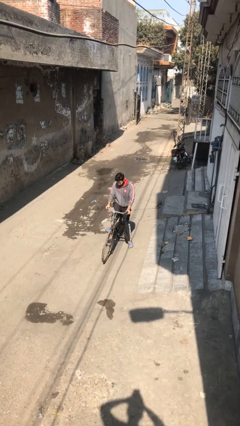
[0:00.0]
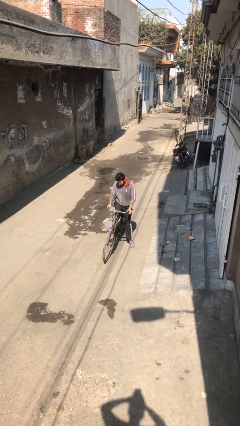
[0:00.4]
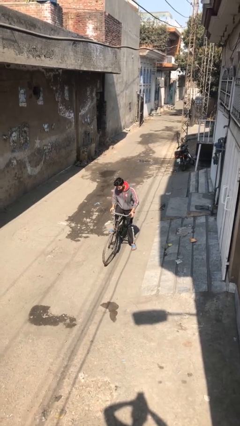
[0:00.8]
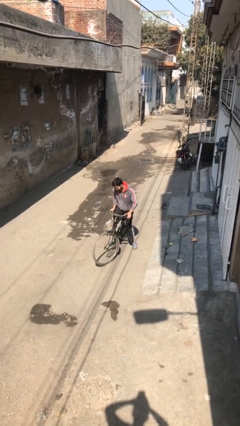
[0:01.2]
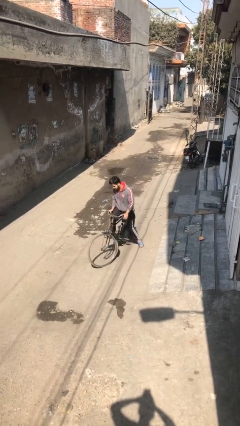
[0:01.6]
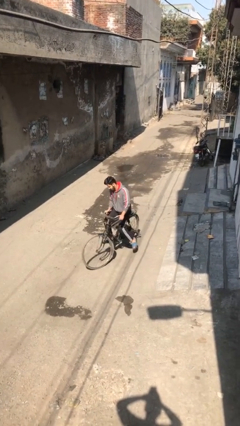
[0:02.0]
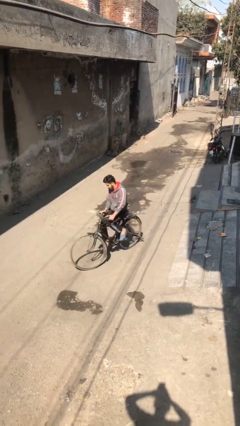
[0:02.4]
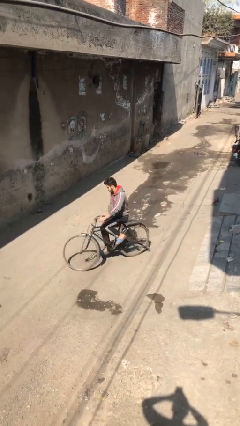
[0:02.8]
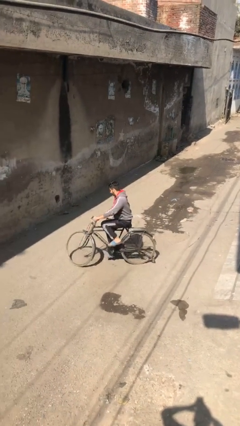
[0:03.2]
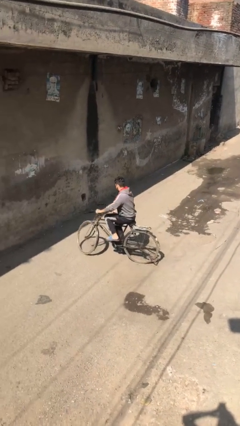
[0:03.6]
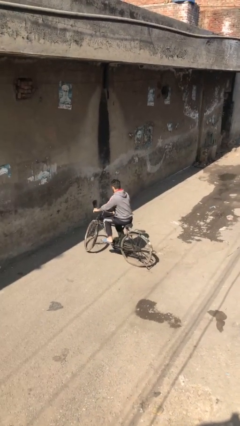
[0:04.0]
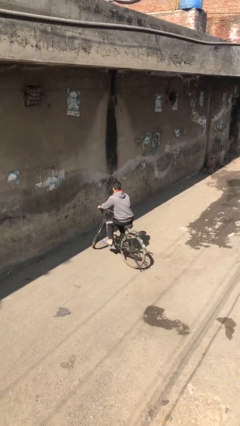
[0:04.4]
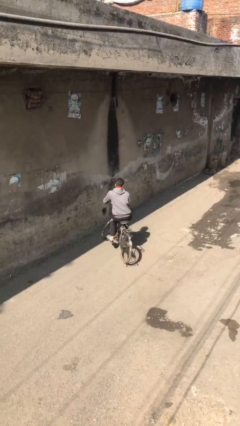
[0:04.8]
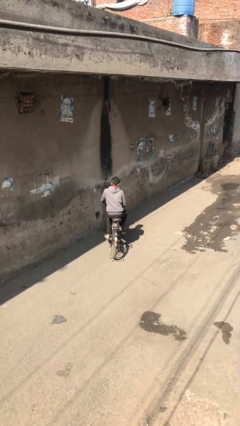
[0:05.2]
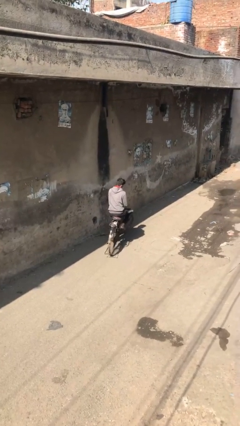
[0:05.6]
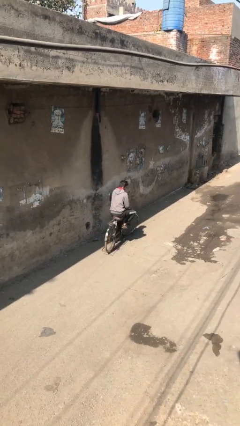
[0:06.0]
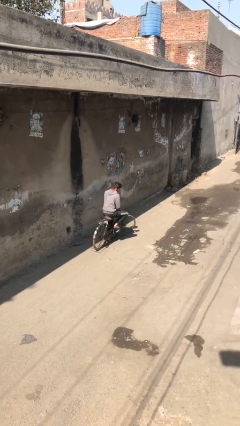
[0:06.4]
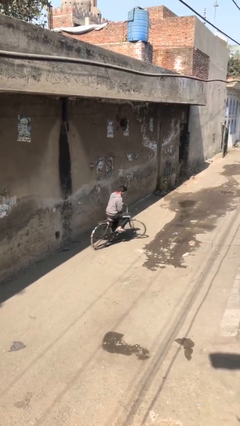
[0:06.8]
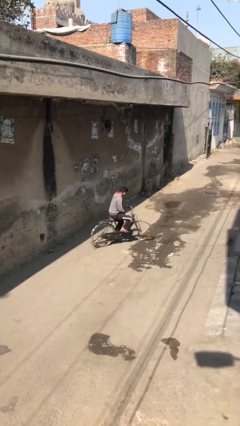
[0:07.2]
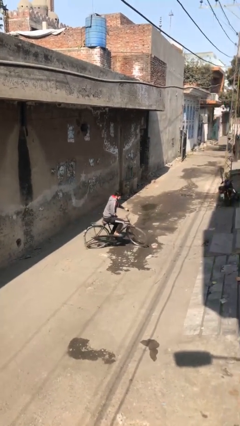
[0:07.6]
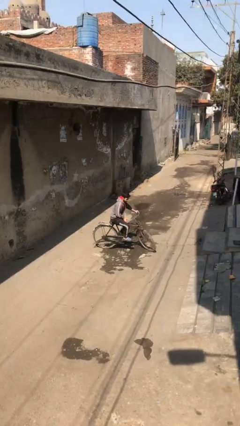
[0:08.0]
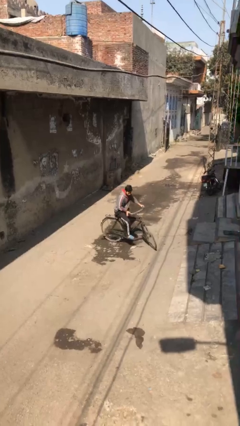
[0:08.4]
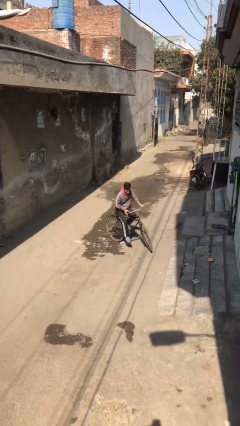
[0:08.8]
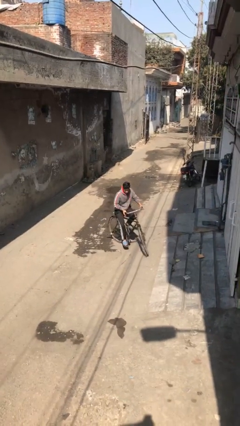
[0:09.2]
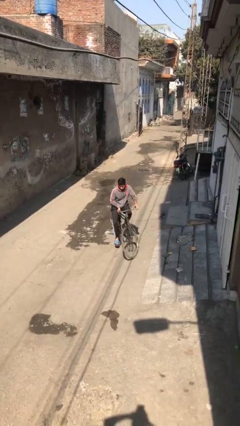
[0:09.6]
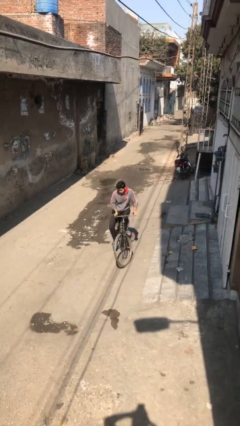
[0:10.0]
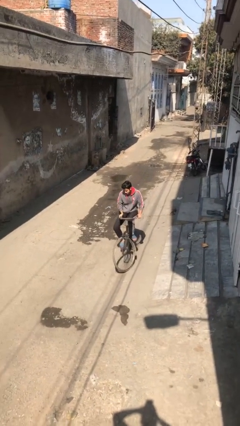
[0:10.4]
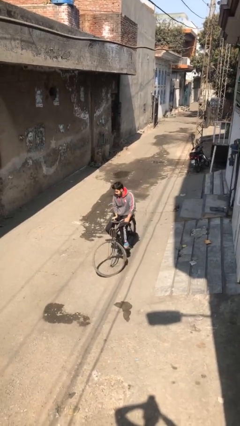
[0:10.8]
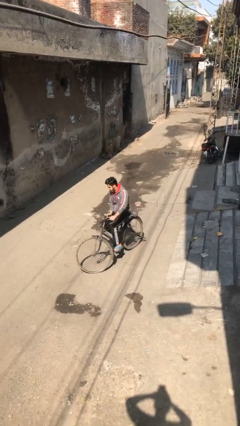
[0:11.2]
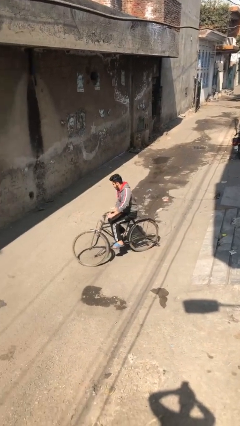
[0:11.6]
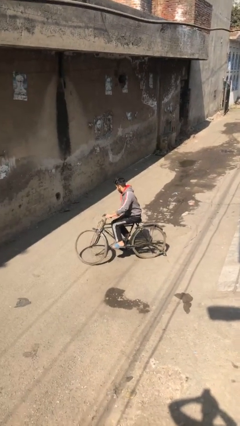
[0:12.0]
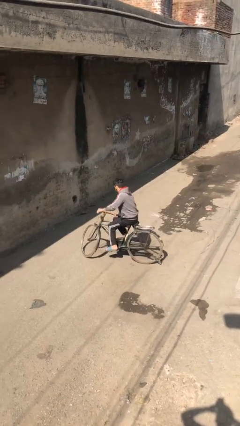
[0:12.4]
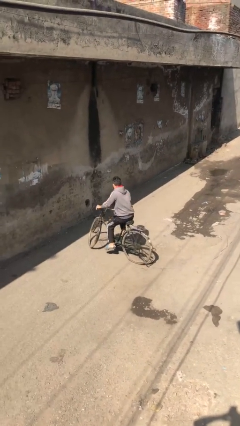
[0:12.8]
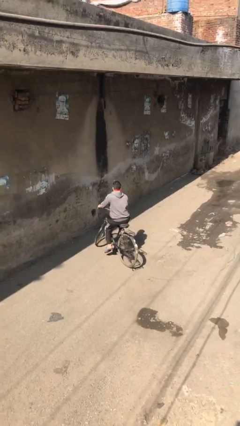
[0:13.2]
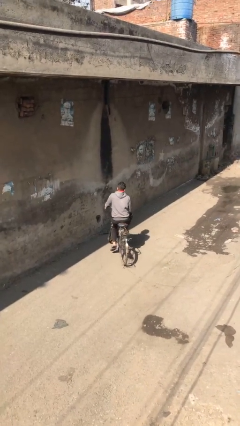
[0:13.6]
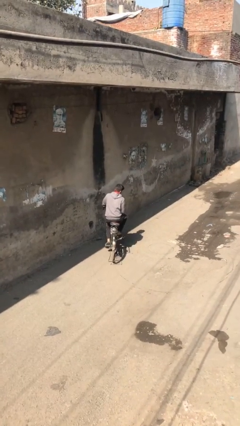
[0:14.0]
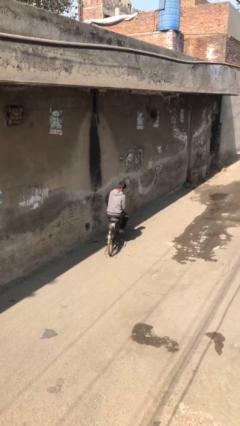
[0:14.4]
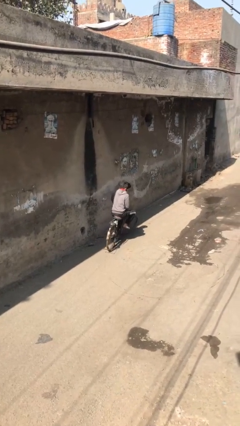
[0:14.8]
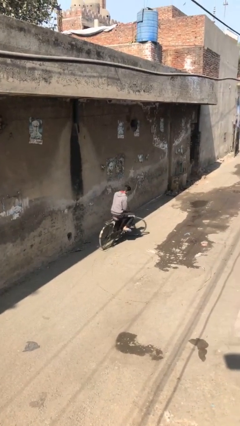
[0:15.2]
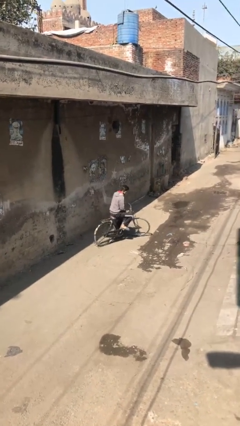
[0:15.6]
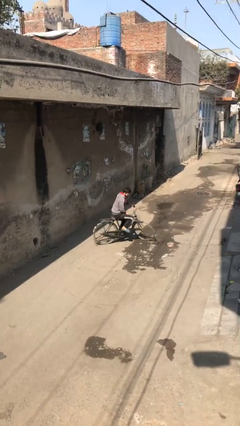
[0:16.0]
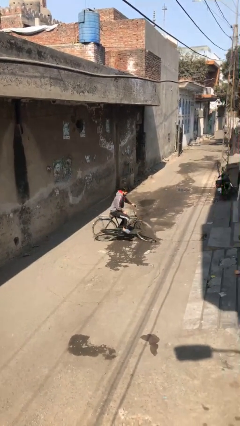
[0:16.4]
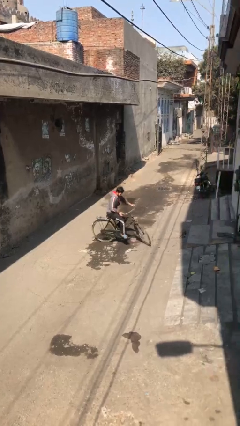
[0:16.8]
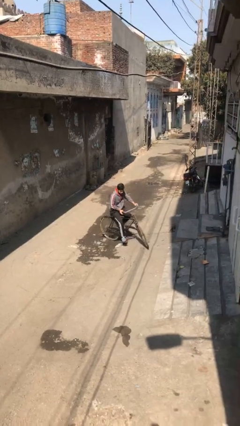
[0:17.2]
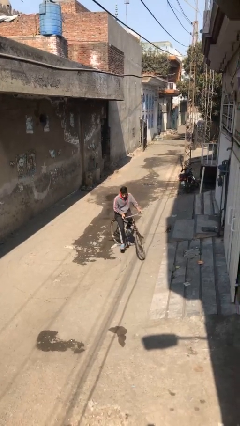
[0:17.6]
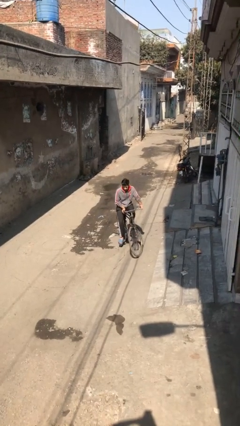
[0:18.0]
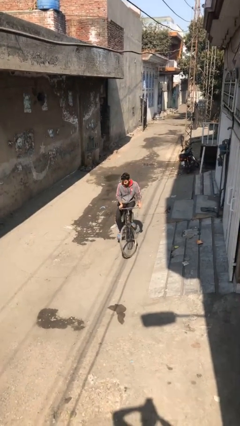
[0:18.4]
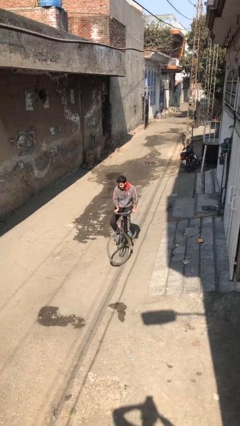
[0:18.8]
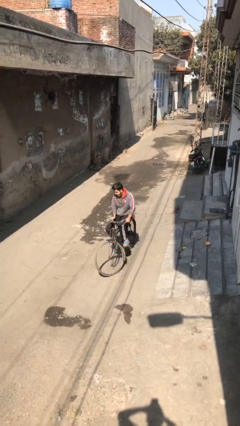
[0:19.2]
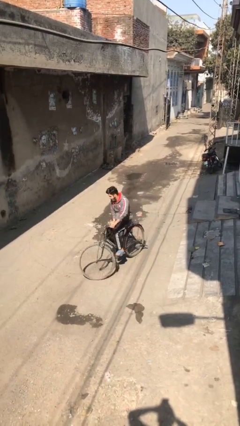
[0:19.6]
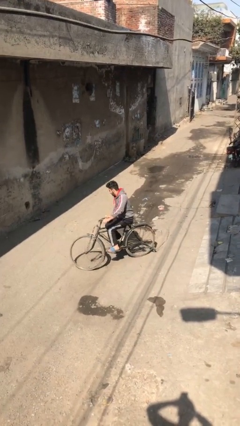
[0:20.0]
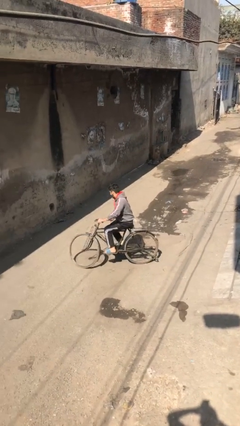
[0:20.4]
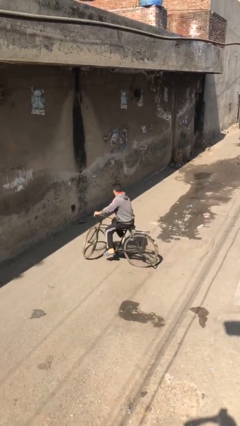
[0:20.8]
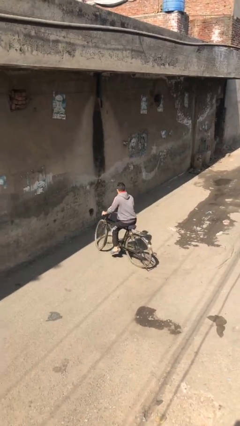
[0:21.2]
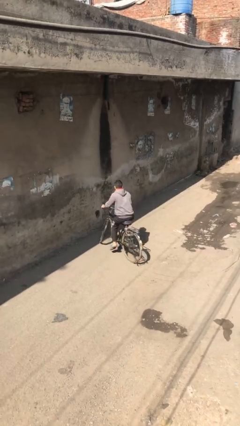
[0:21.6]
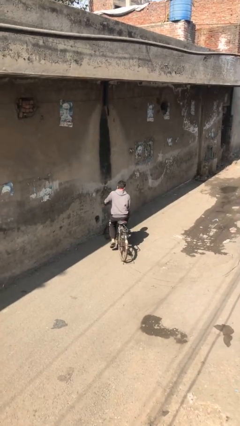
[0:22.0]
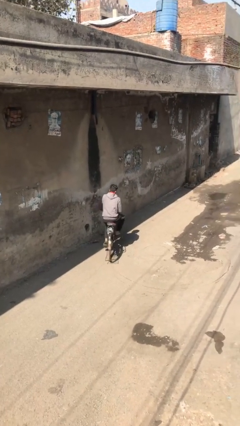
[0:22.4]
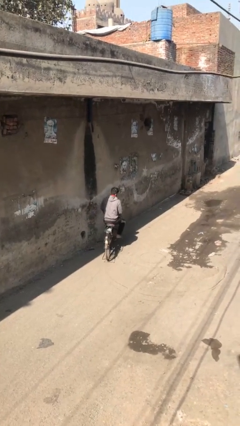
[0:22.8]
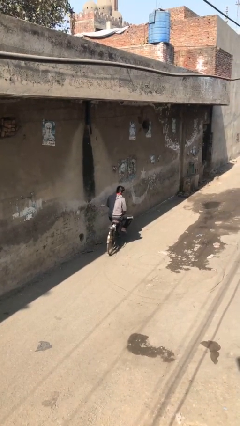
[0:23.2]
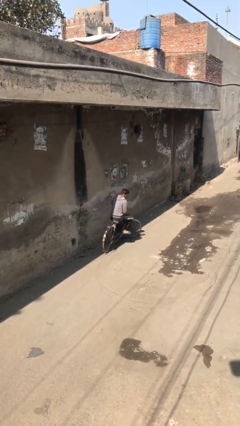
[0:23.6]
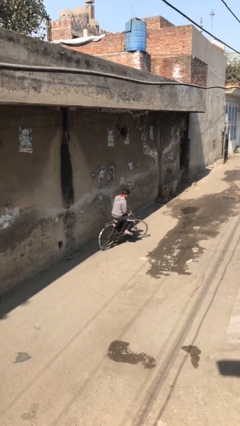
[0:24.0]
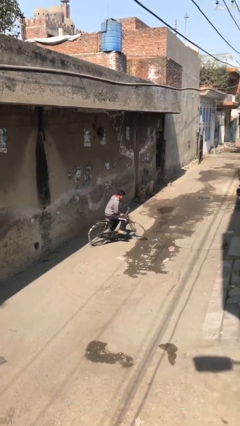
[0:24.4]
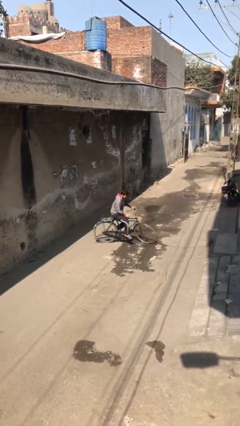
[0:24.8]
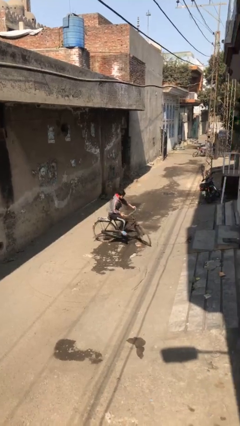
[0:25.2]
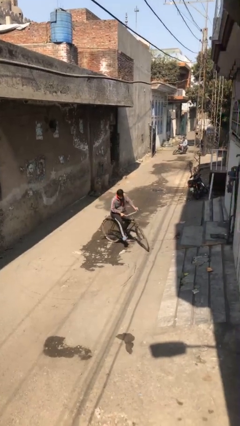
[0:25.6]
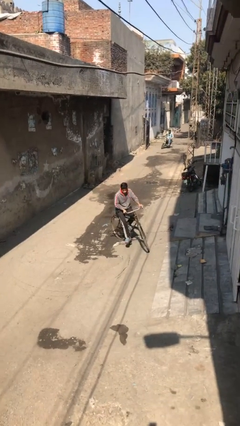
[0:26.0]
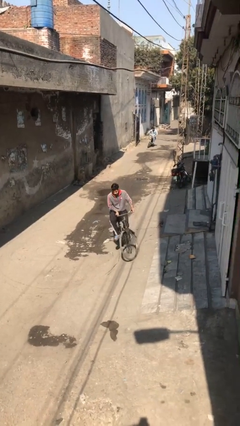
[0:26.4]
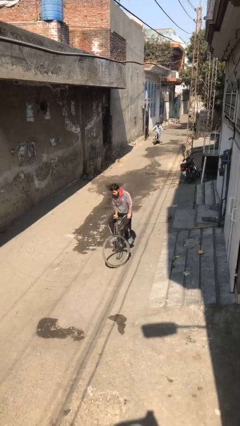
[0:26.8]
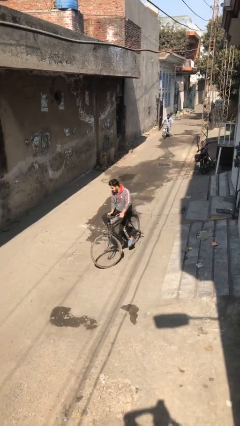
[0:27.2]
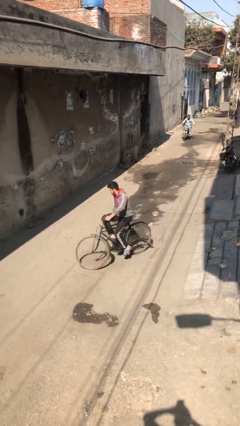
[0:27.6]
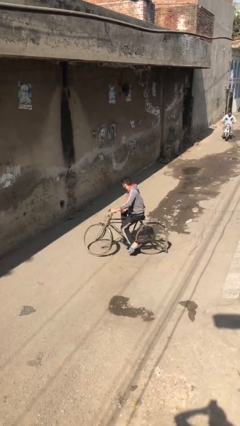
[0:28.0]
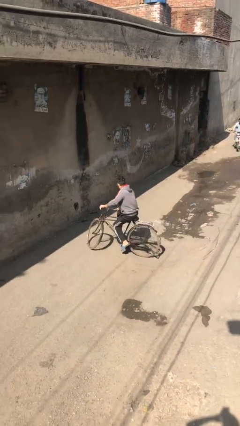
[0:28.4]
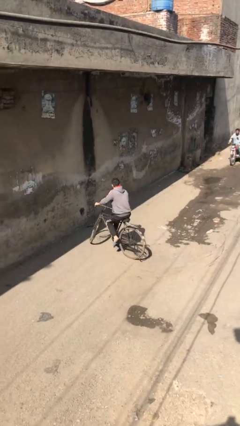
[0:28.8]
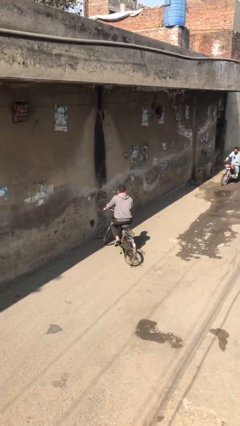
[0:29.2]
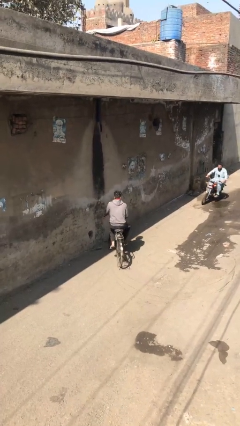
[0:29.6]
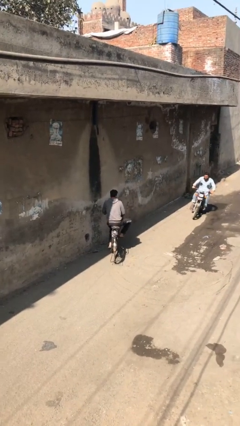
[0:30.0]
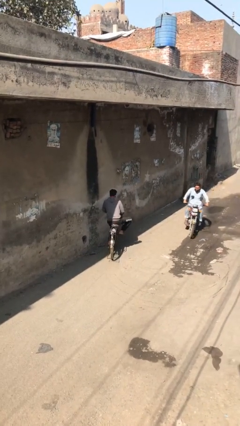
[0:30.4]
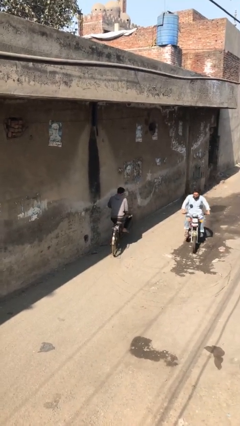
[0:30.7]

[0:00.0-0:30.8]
person rides bicycle

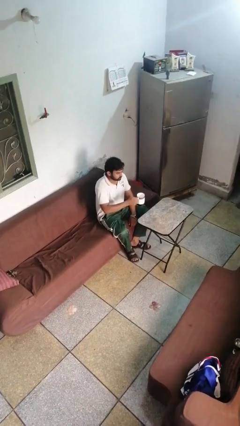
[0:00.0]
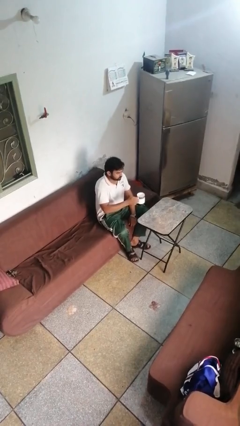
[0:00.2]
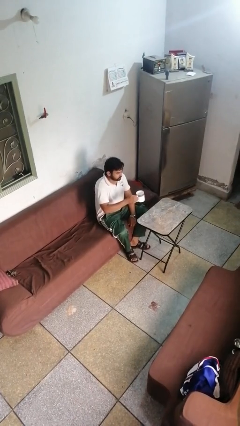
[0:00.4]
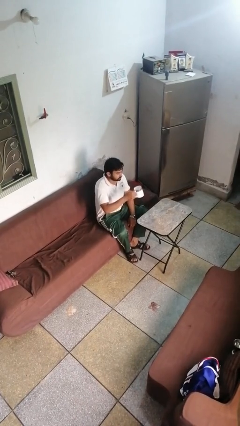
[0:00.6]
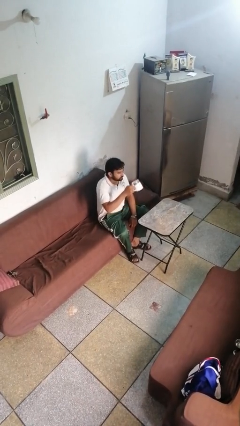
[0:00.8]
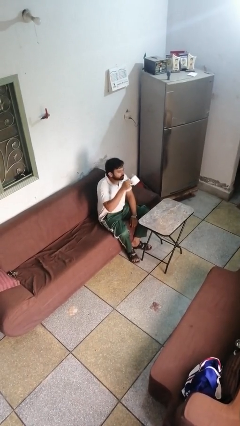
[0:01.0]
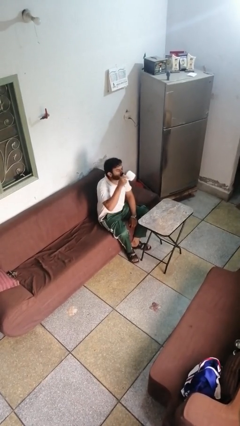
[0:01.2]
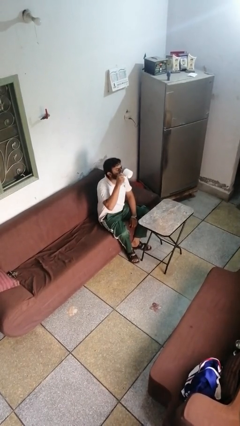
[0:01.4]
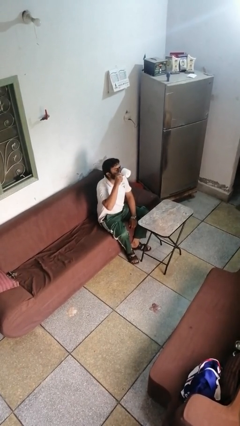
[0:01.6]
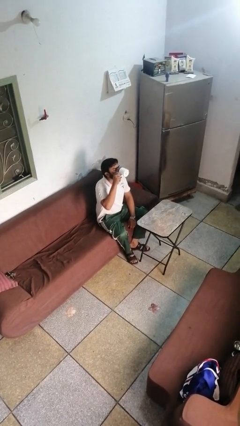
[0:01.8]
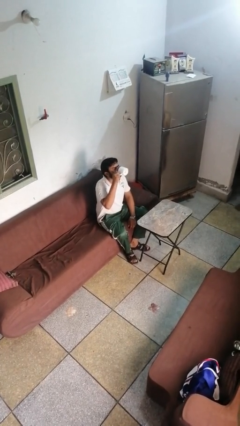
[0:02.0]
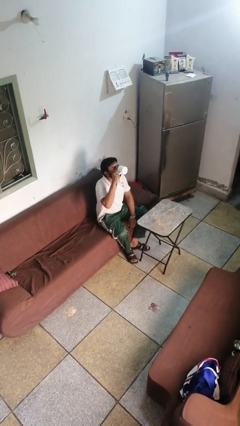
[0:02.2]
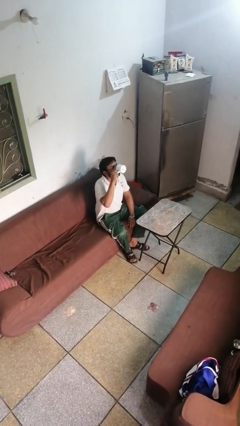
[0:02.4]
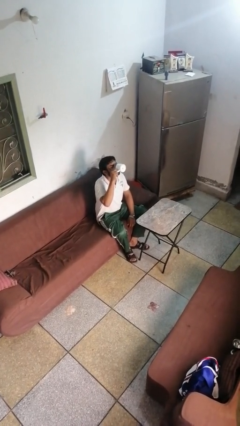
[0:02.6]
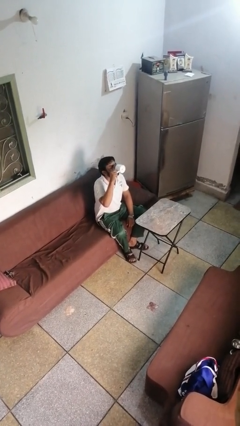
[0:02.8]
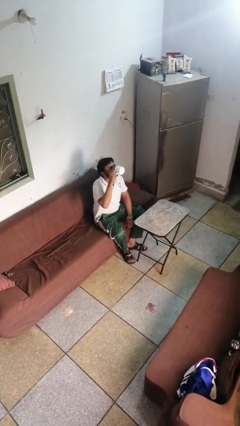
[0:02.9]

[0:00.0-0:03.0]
person drinks from mug
